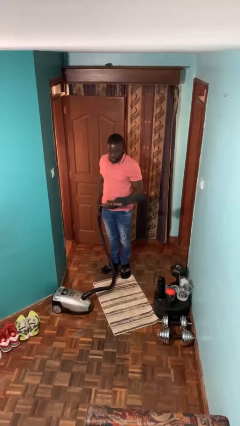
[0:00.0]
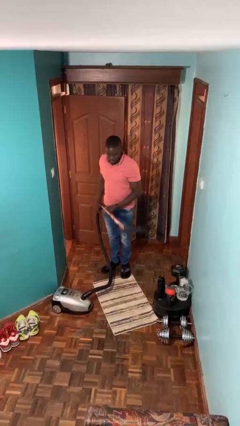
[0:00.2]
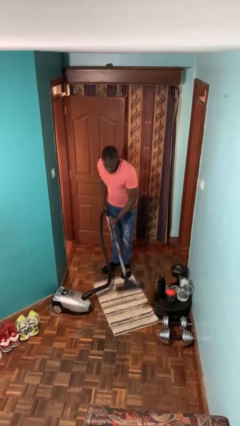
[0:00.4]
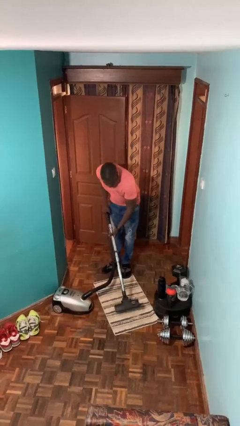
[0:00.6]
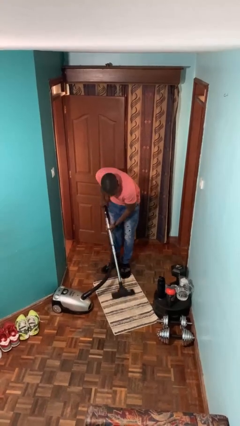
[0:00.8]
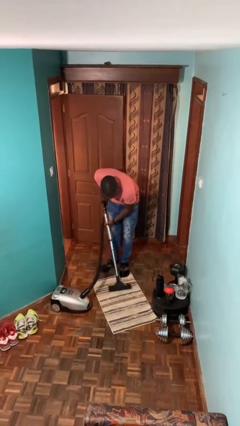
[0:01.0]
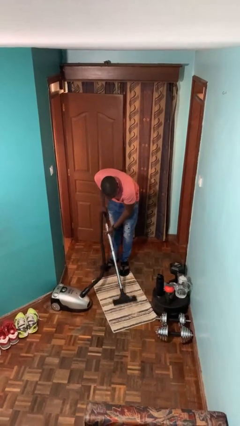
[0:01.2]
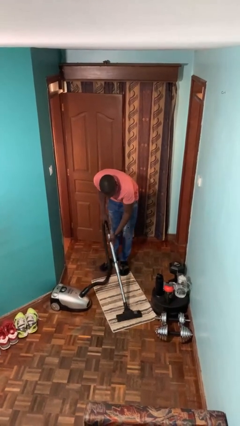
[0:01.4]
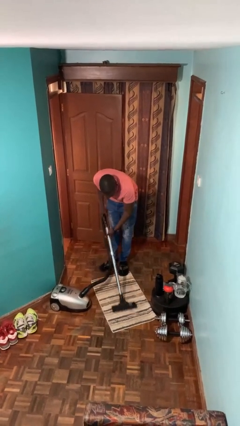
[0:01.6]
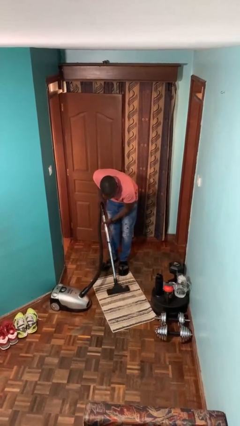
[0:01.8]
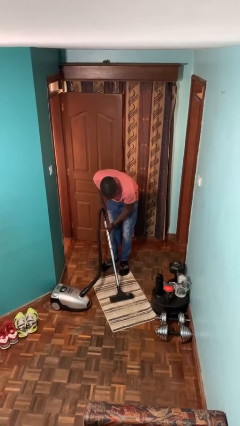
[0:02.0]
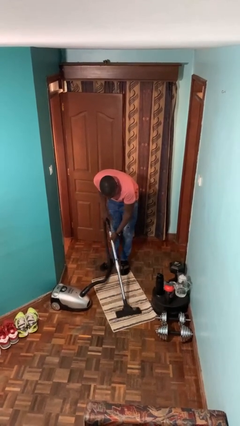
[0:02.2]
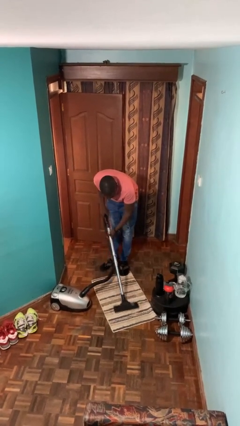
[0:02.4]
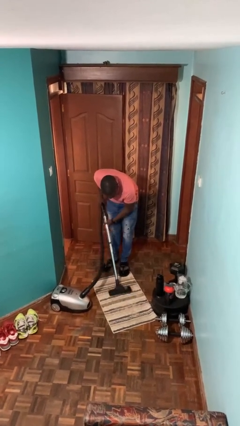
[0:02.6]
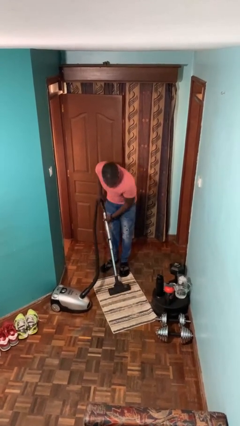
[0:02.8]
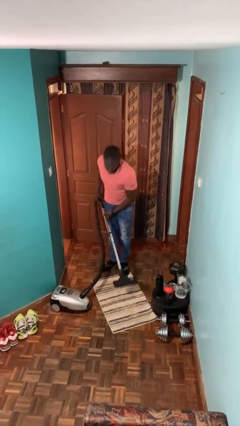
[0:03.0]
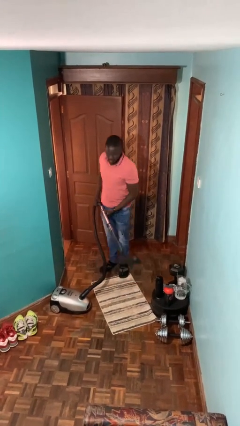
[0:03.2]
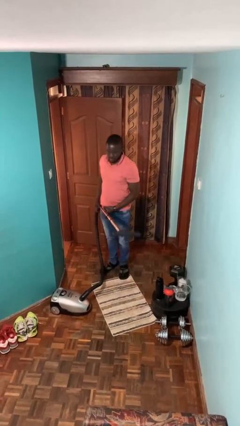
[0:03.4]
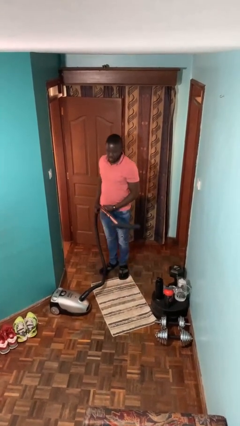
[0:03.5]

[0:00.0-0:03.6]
person vacuums carpet

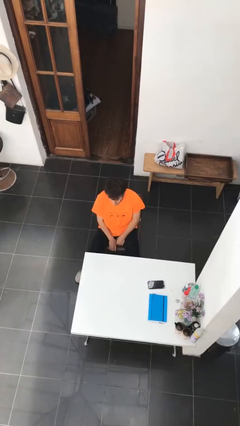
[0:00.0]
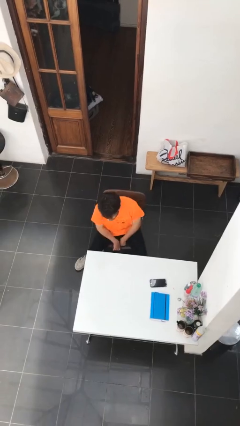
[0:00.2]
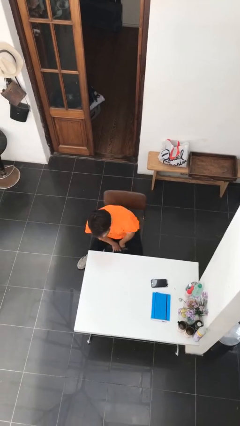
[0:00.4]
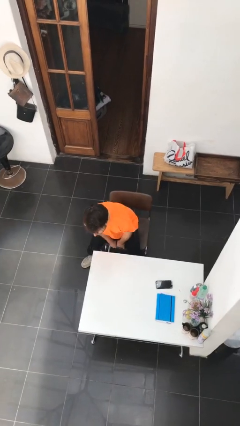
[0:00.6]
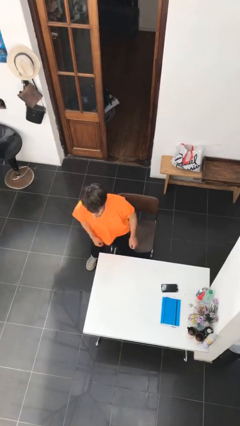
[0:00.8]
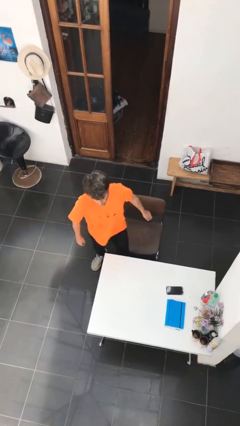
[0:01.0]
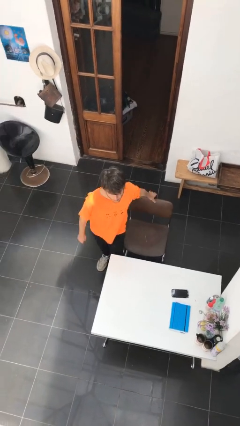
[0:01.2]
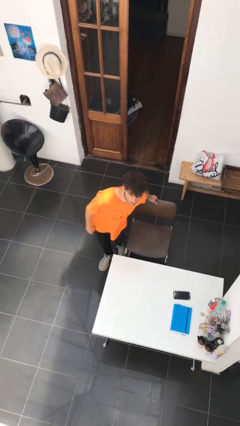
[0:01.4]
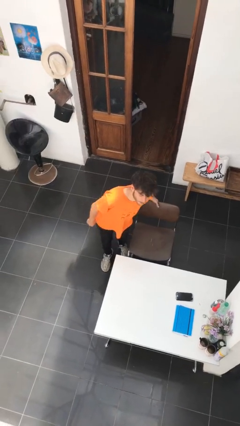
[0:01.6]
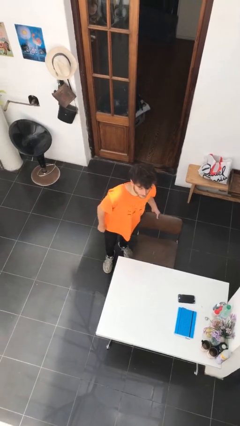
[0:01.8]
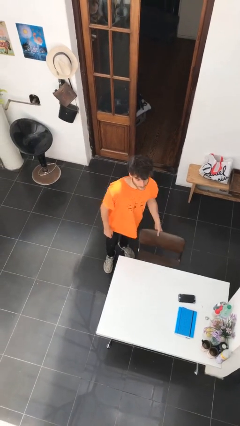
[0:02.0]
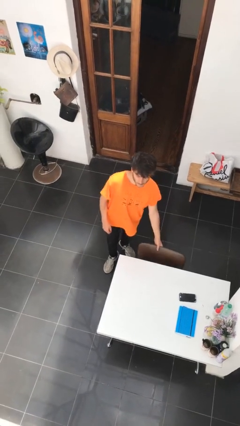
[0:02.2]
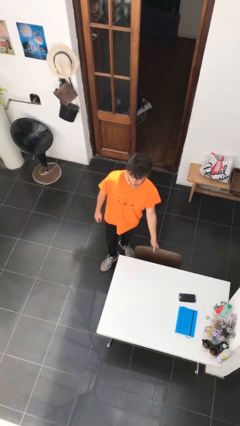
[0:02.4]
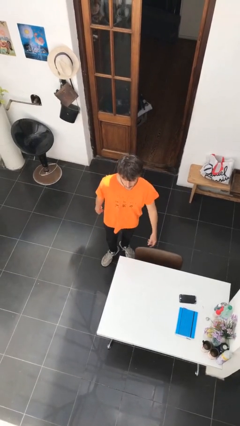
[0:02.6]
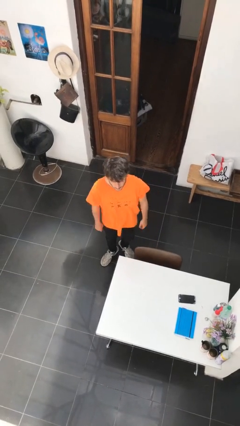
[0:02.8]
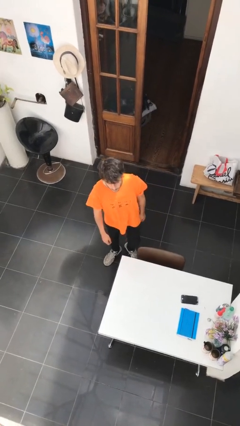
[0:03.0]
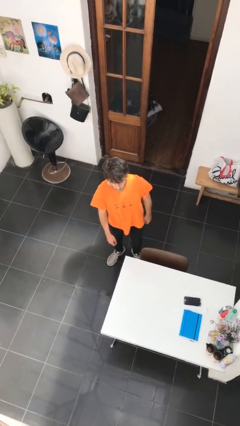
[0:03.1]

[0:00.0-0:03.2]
person stands up

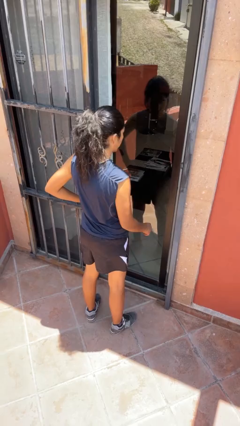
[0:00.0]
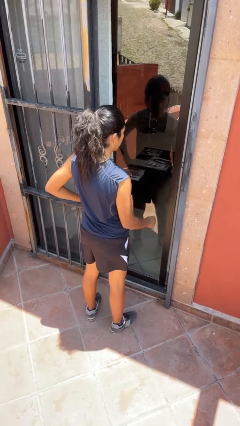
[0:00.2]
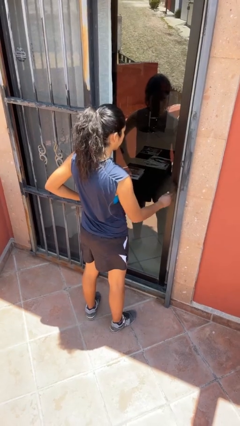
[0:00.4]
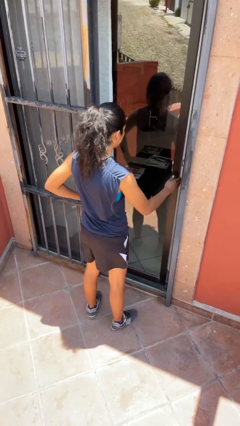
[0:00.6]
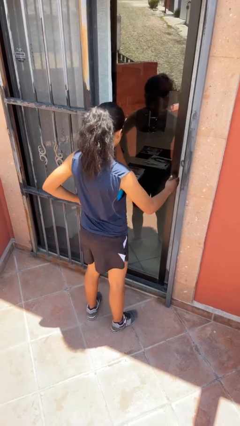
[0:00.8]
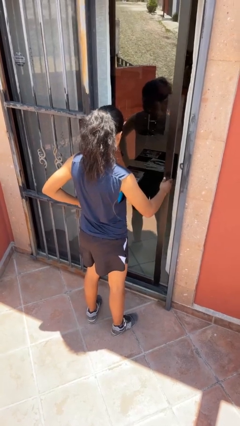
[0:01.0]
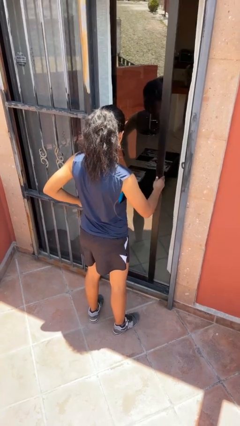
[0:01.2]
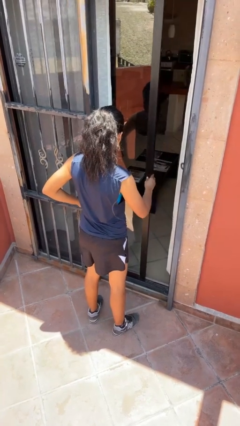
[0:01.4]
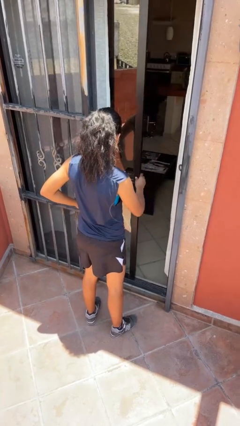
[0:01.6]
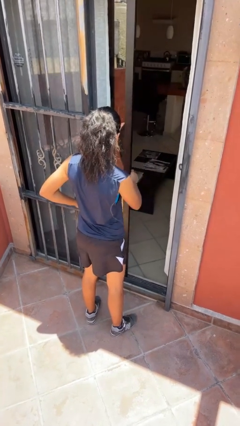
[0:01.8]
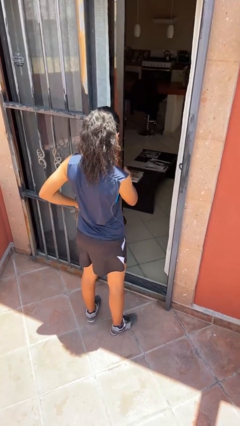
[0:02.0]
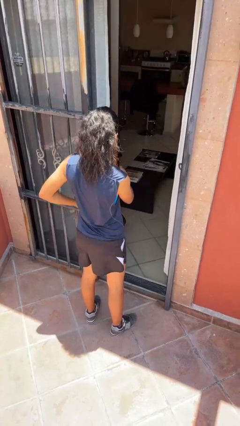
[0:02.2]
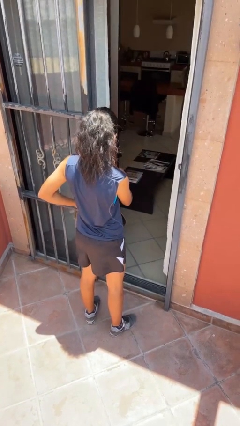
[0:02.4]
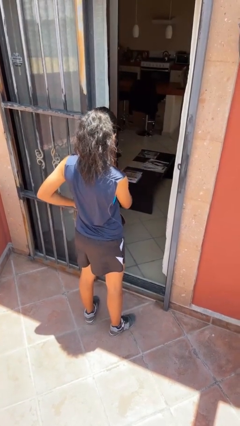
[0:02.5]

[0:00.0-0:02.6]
person opens sliding door

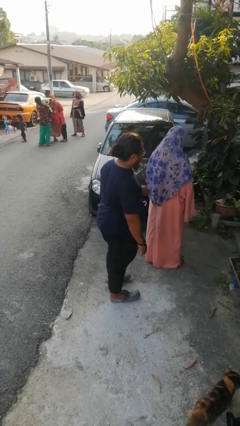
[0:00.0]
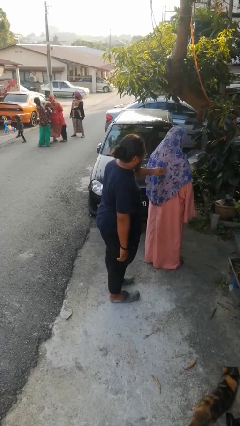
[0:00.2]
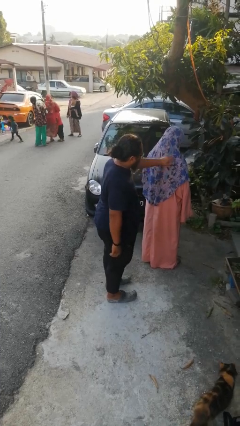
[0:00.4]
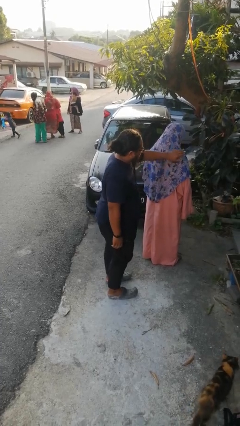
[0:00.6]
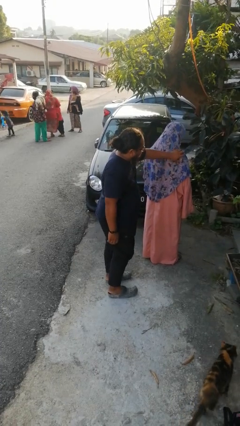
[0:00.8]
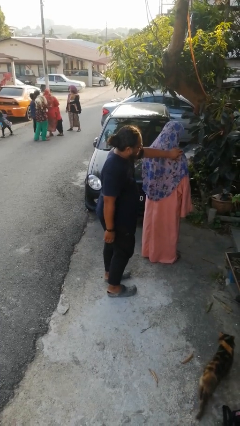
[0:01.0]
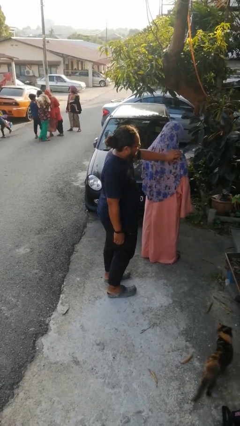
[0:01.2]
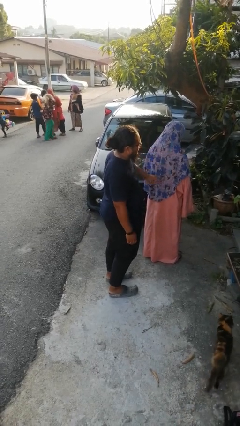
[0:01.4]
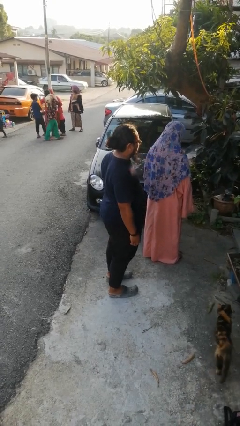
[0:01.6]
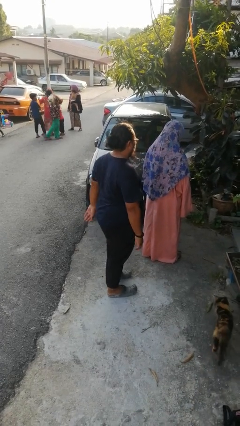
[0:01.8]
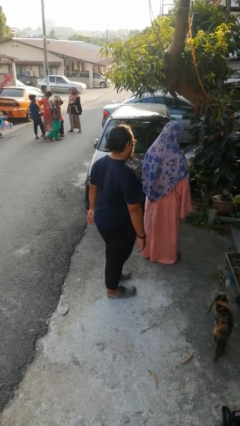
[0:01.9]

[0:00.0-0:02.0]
person touches back of person

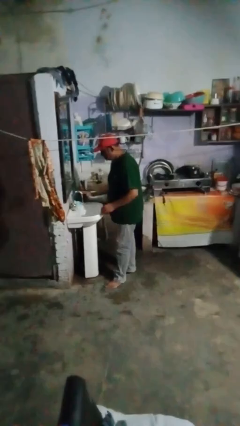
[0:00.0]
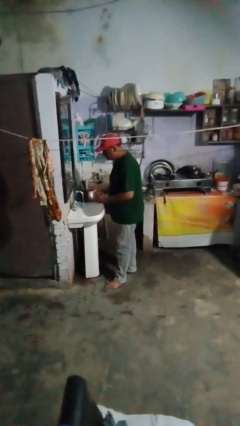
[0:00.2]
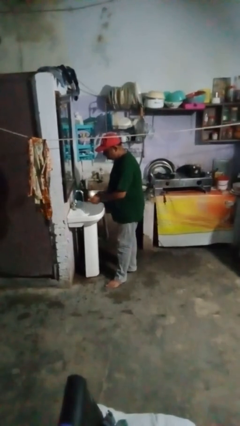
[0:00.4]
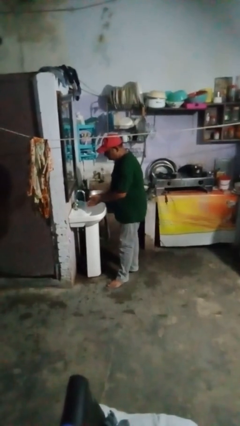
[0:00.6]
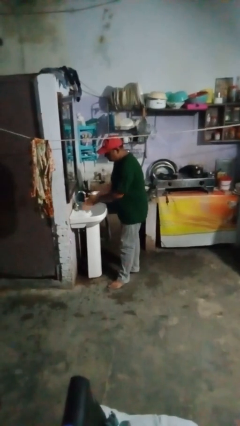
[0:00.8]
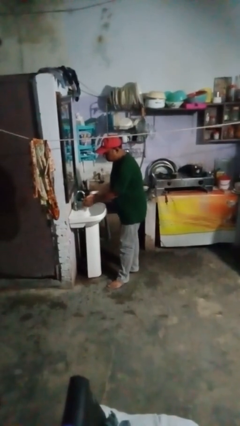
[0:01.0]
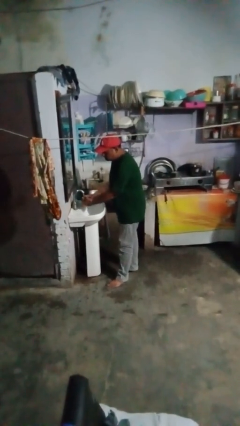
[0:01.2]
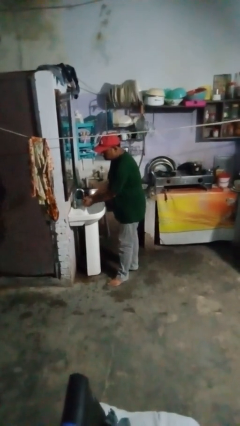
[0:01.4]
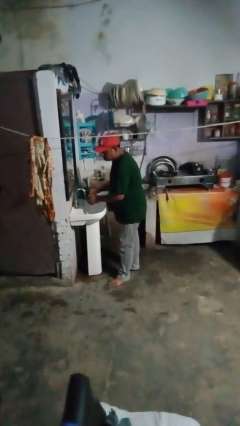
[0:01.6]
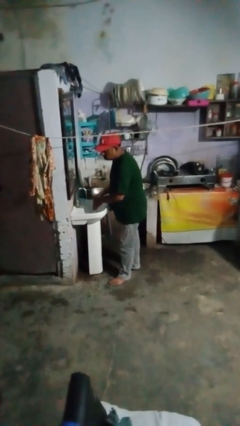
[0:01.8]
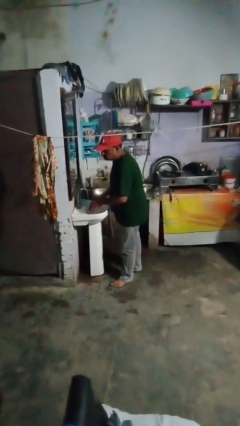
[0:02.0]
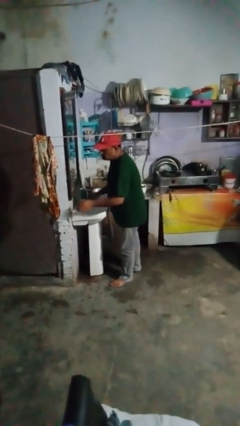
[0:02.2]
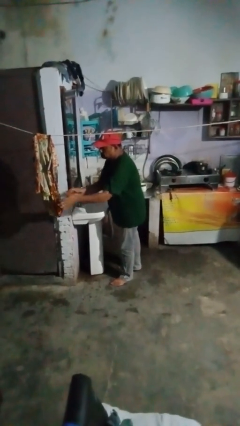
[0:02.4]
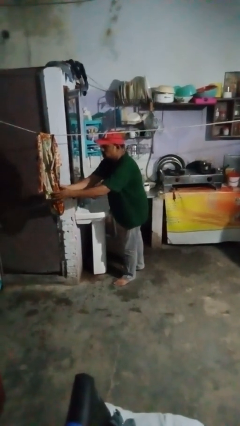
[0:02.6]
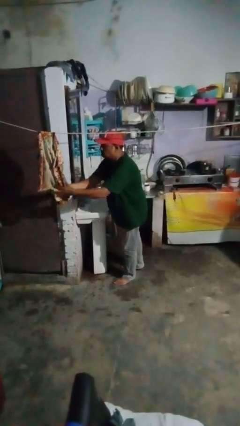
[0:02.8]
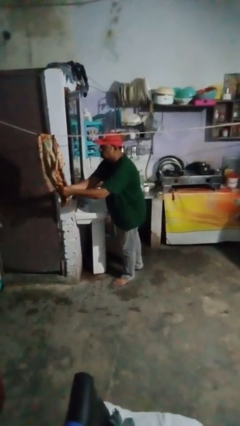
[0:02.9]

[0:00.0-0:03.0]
person washes hands

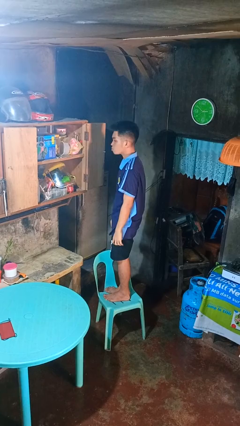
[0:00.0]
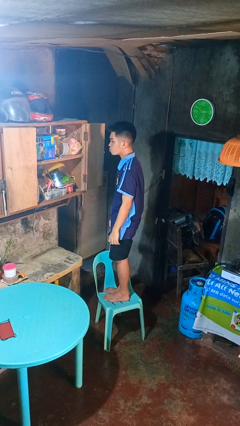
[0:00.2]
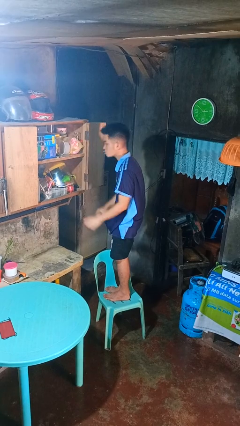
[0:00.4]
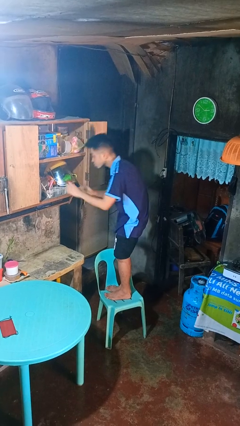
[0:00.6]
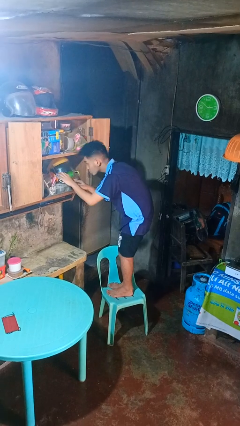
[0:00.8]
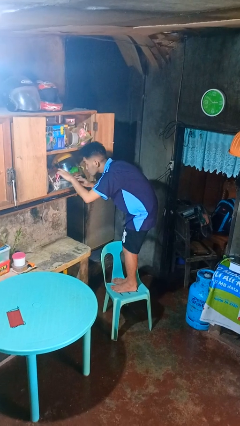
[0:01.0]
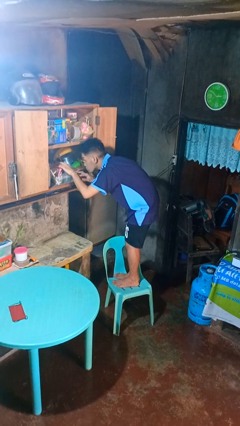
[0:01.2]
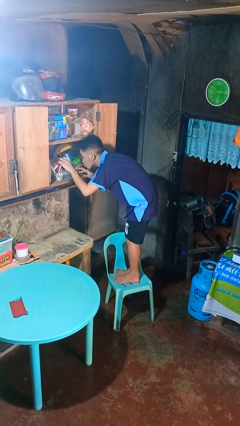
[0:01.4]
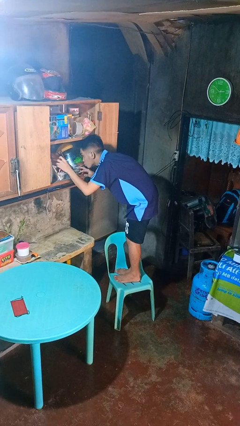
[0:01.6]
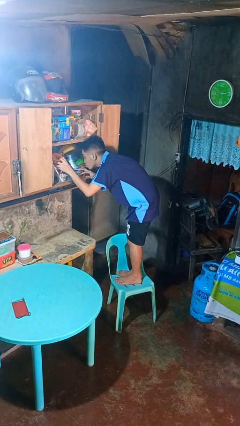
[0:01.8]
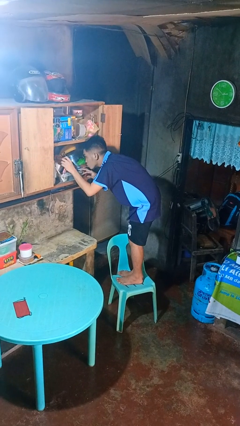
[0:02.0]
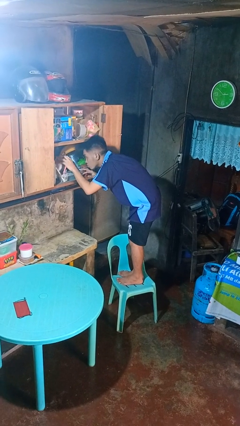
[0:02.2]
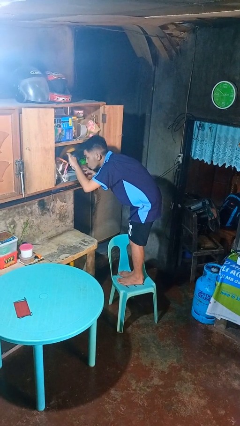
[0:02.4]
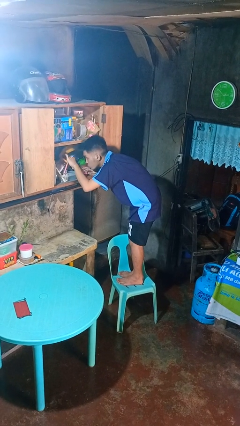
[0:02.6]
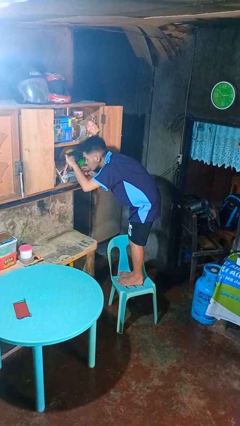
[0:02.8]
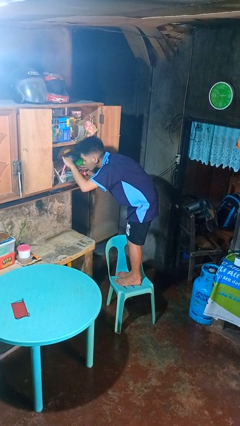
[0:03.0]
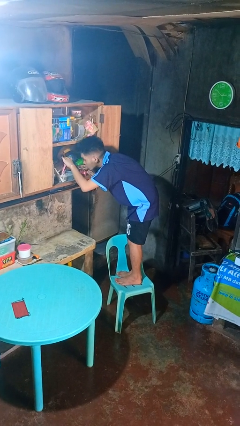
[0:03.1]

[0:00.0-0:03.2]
person searches in cabinet
